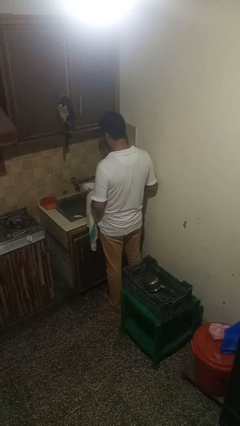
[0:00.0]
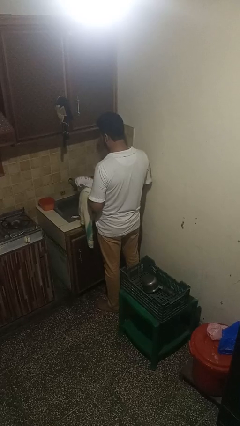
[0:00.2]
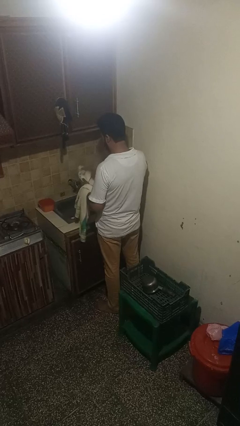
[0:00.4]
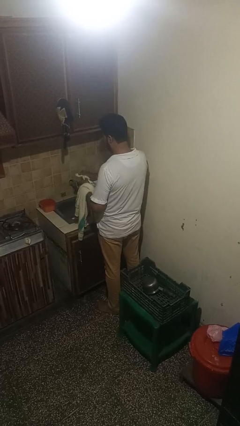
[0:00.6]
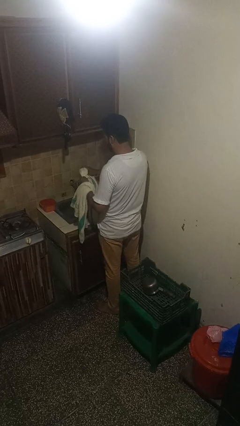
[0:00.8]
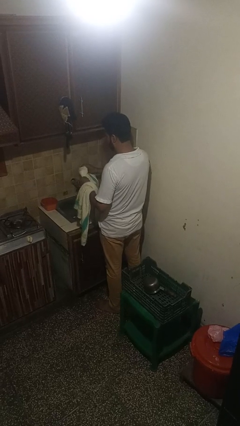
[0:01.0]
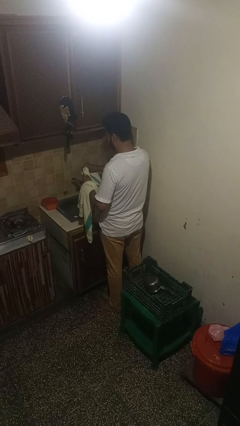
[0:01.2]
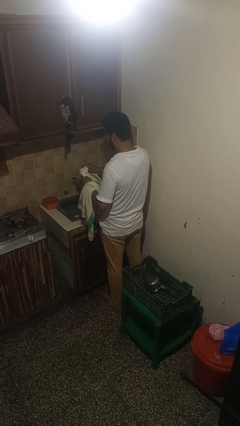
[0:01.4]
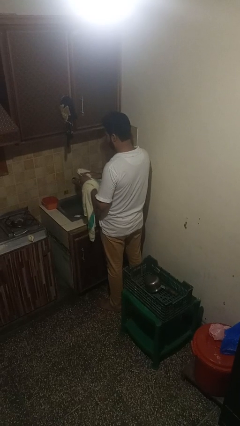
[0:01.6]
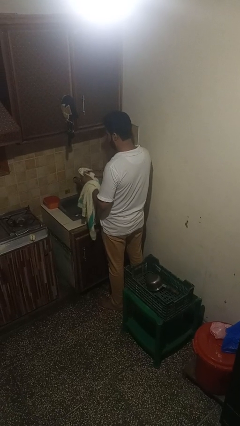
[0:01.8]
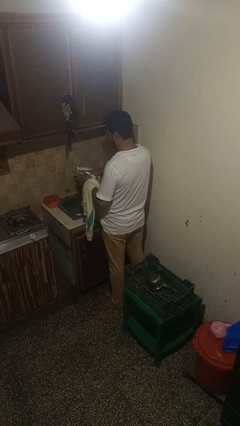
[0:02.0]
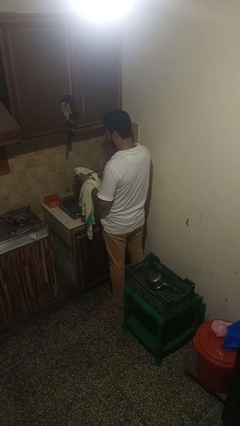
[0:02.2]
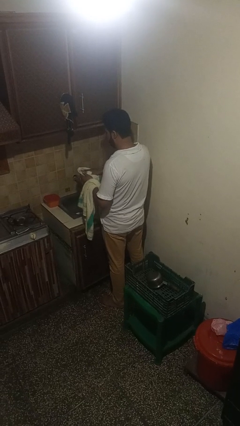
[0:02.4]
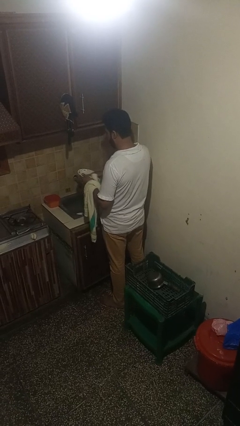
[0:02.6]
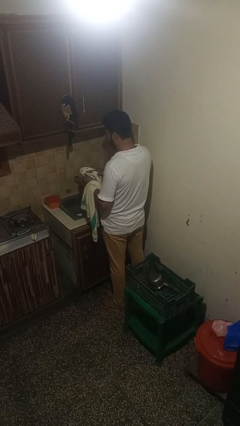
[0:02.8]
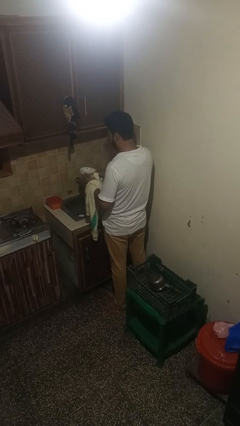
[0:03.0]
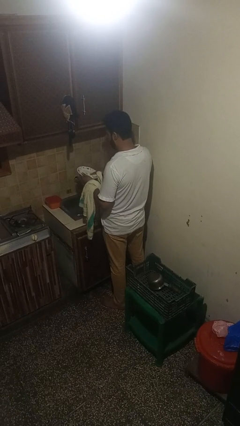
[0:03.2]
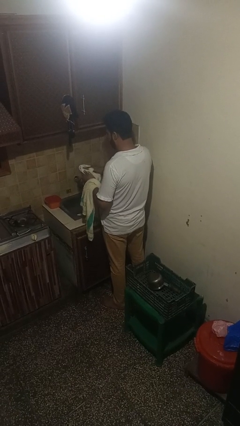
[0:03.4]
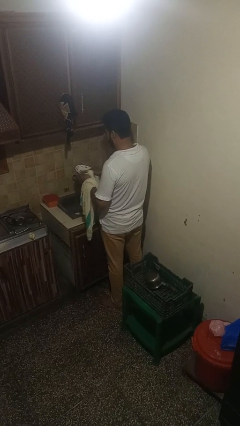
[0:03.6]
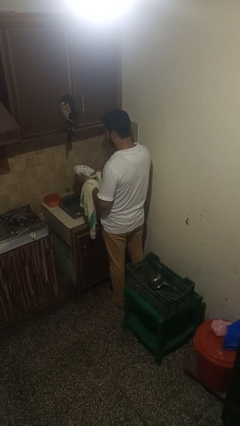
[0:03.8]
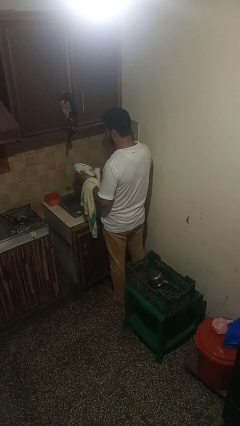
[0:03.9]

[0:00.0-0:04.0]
person dries dish

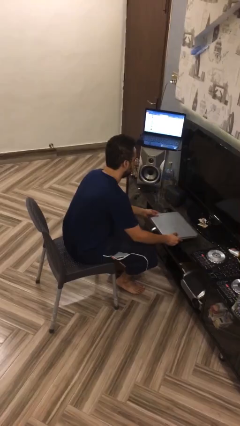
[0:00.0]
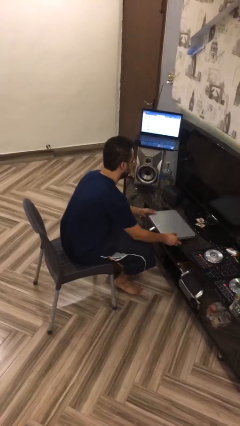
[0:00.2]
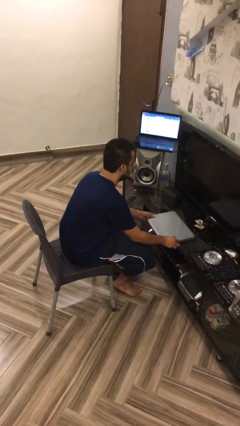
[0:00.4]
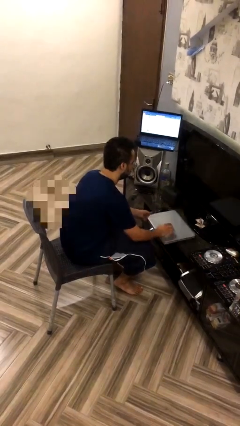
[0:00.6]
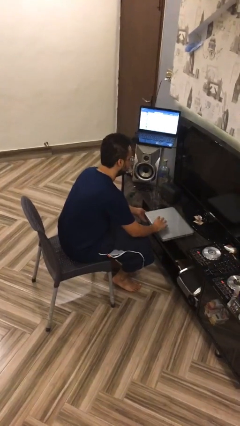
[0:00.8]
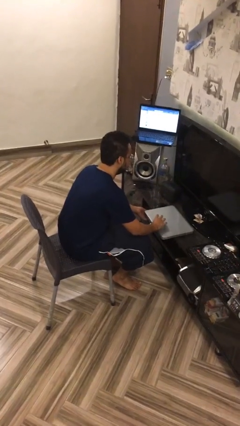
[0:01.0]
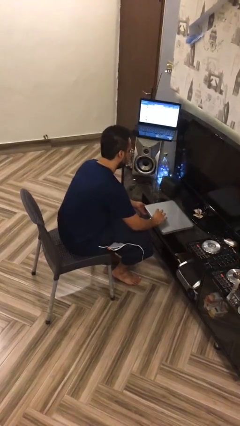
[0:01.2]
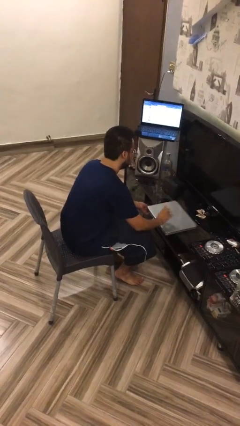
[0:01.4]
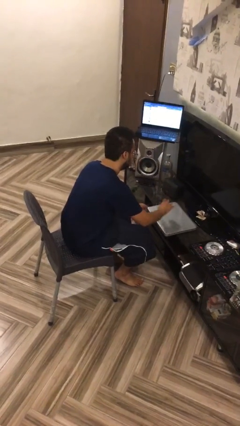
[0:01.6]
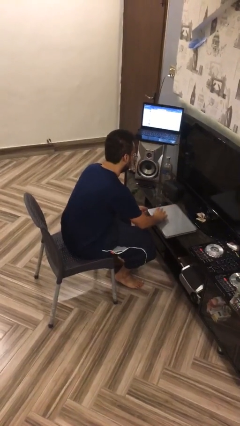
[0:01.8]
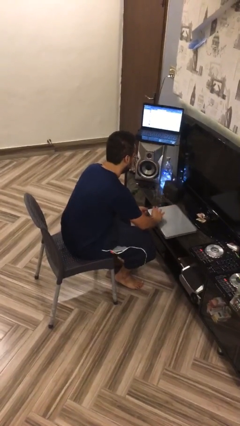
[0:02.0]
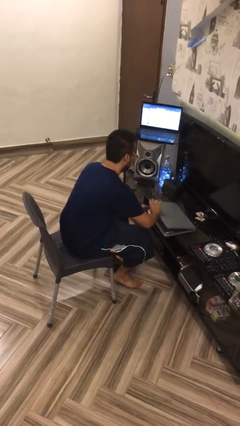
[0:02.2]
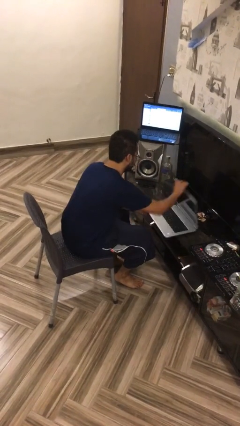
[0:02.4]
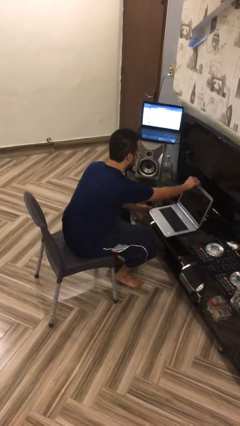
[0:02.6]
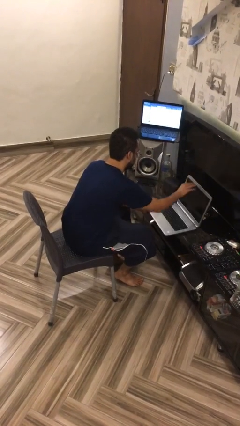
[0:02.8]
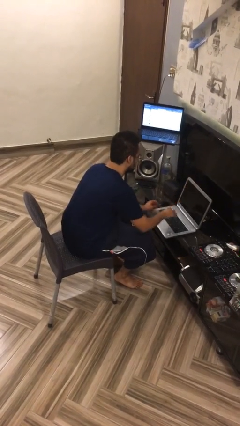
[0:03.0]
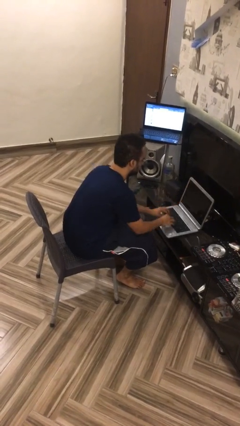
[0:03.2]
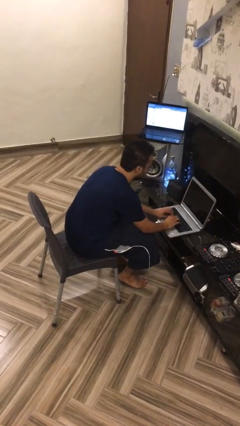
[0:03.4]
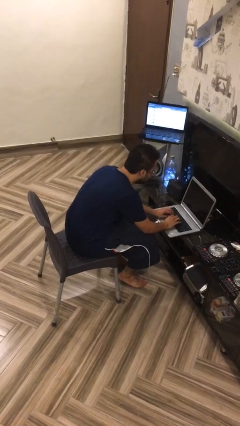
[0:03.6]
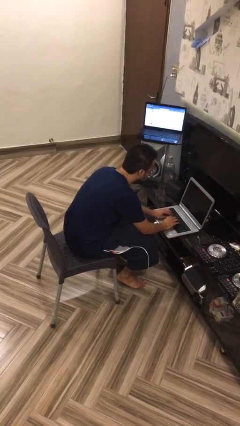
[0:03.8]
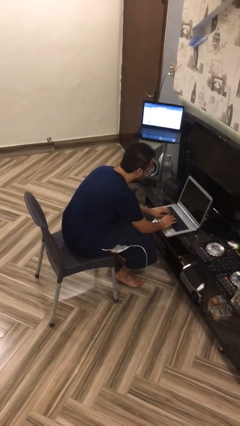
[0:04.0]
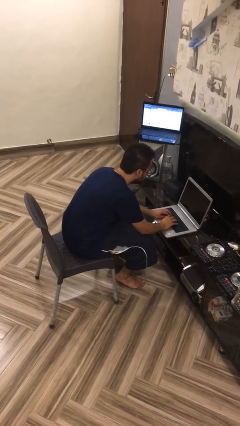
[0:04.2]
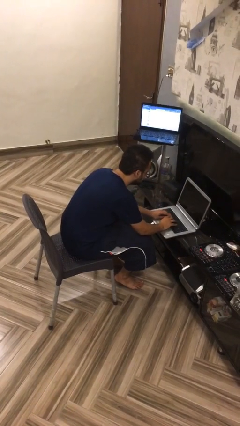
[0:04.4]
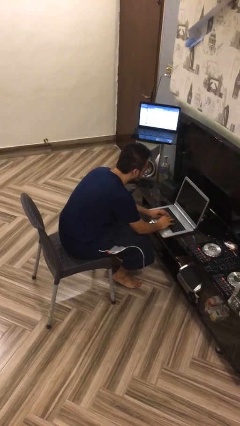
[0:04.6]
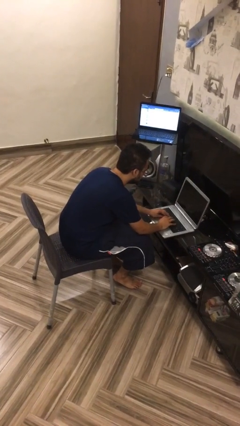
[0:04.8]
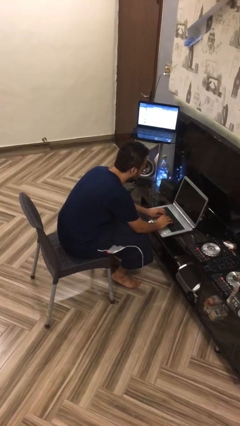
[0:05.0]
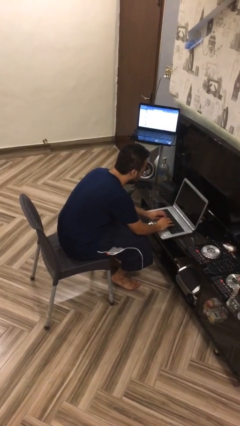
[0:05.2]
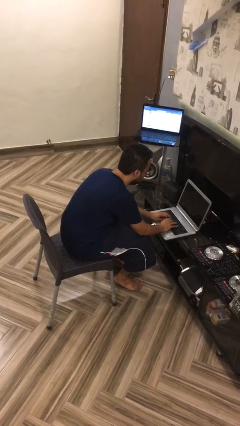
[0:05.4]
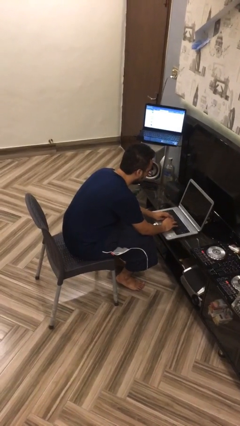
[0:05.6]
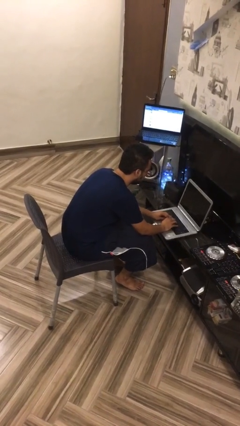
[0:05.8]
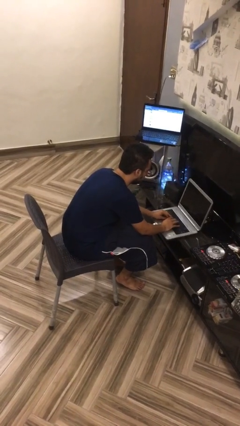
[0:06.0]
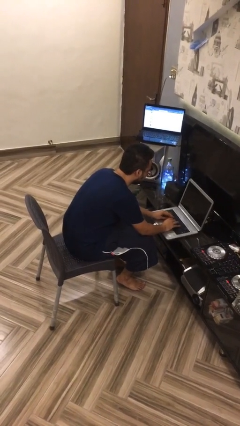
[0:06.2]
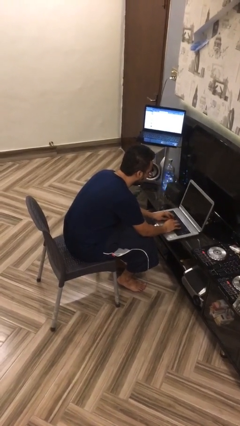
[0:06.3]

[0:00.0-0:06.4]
person interacts with laptop

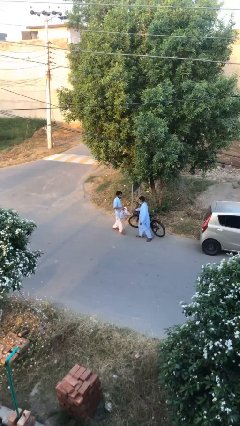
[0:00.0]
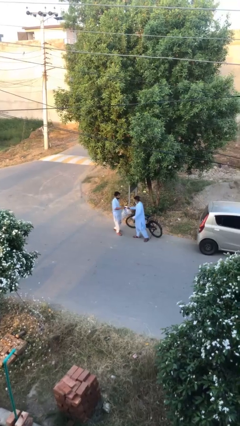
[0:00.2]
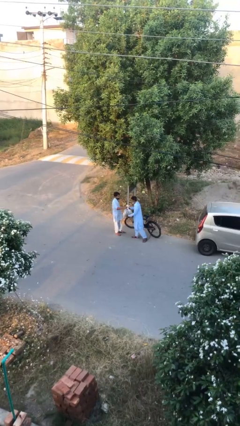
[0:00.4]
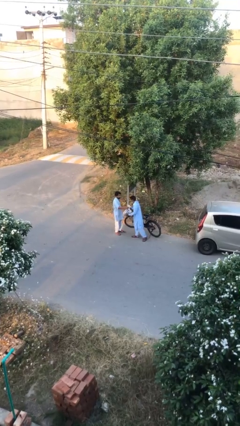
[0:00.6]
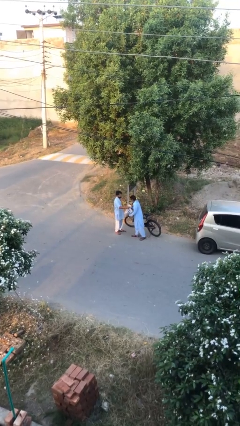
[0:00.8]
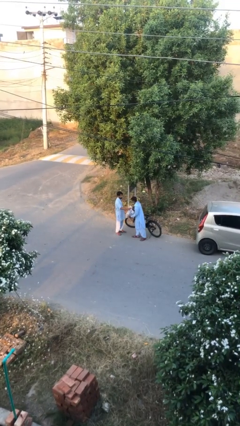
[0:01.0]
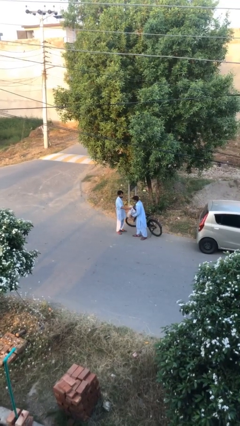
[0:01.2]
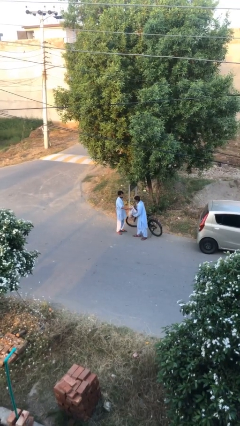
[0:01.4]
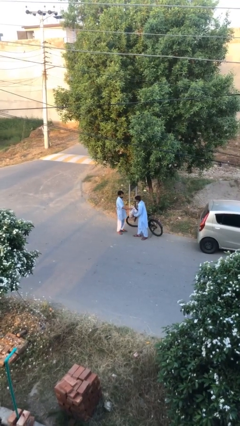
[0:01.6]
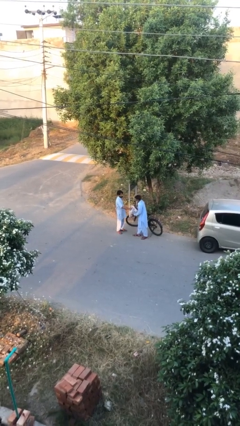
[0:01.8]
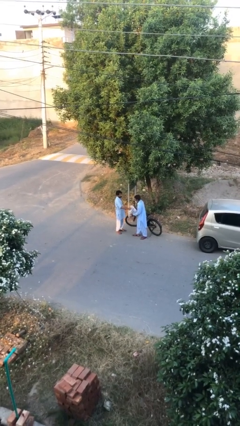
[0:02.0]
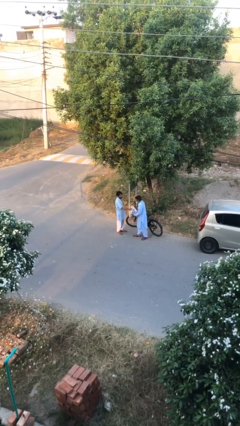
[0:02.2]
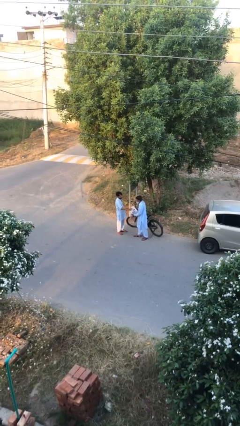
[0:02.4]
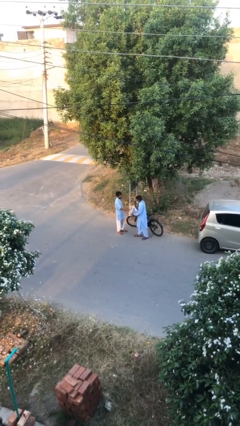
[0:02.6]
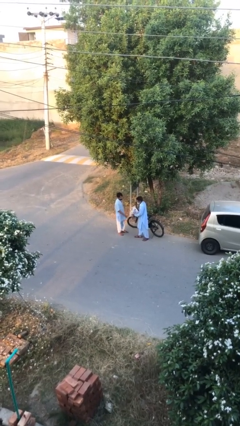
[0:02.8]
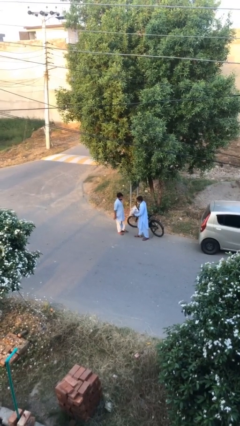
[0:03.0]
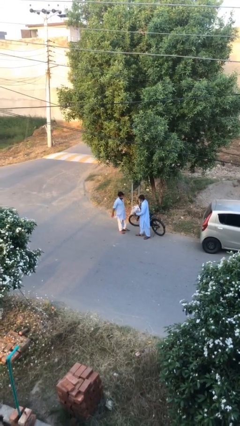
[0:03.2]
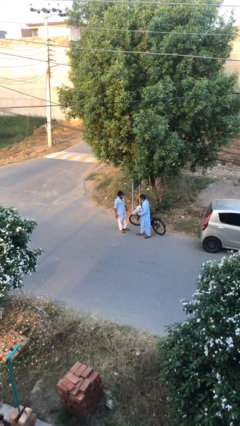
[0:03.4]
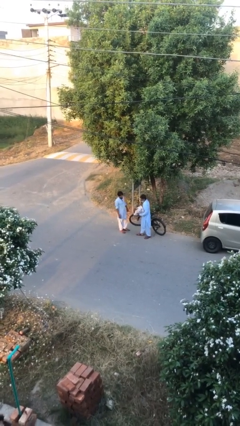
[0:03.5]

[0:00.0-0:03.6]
person transfers object to person

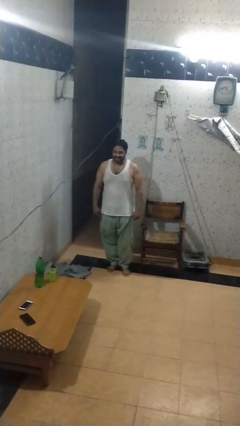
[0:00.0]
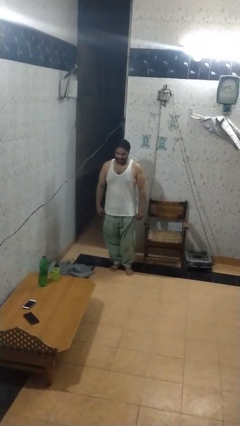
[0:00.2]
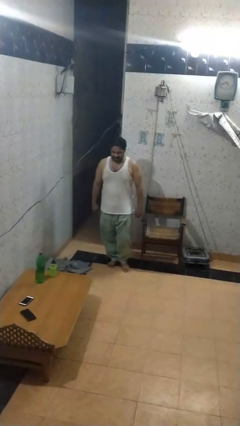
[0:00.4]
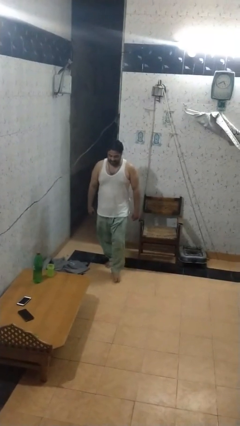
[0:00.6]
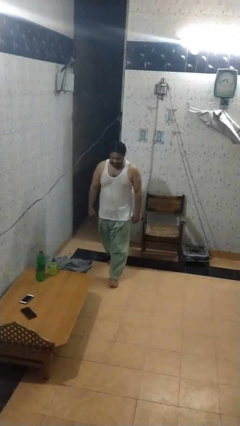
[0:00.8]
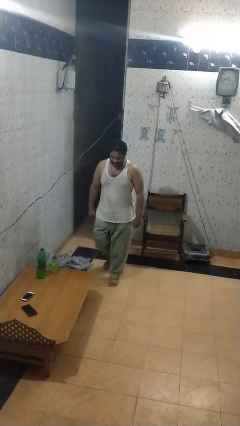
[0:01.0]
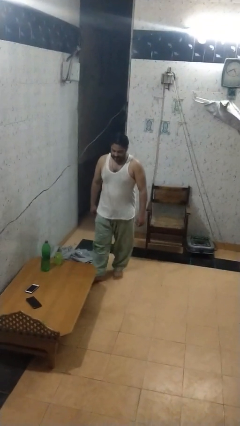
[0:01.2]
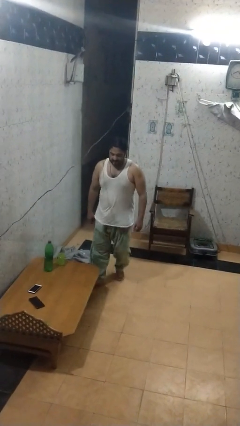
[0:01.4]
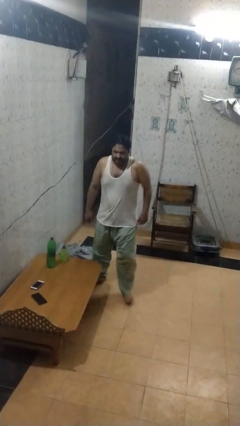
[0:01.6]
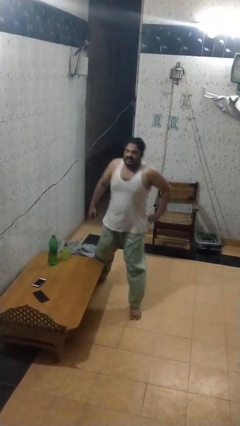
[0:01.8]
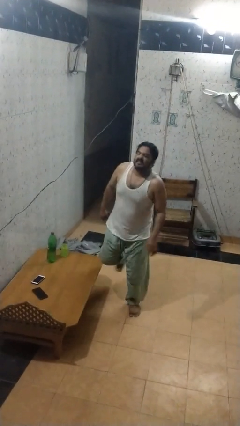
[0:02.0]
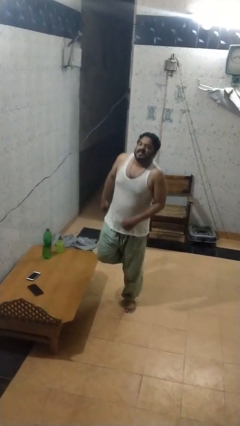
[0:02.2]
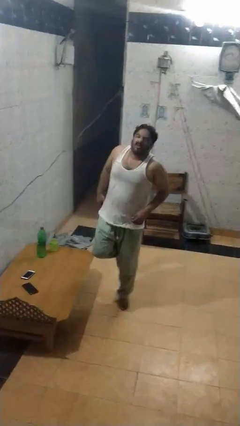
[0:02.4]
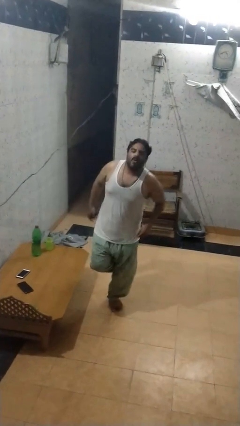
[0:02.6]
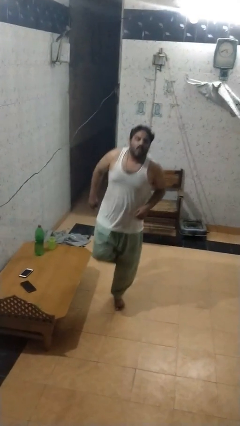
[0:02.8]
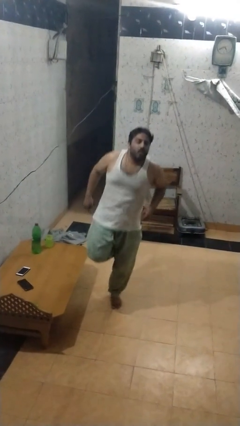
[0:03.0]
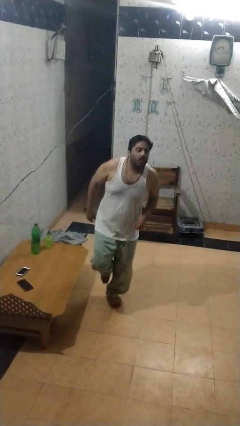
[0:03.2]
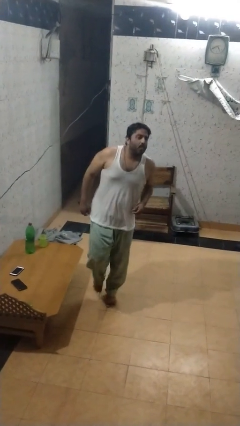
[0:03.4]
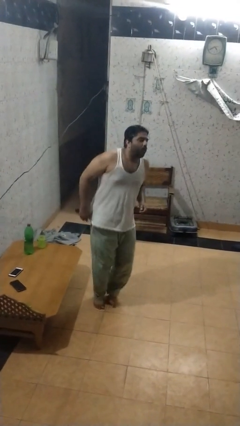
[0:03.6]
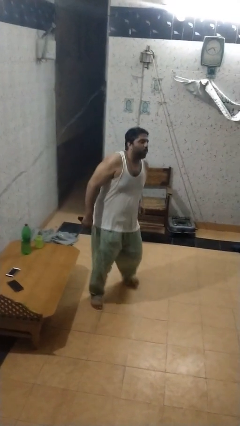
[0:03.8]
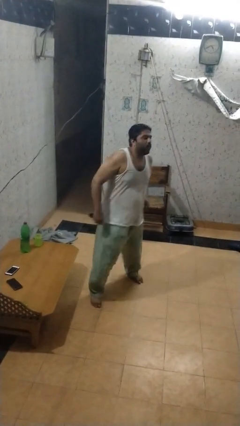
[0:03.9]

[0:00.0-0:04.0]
person bumps into table
